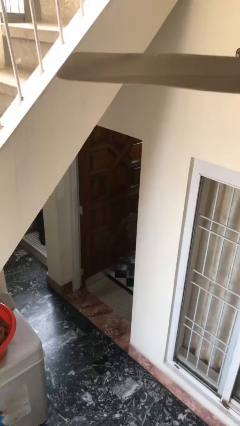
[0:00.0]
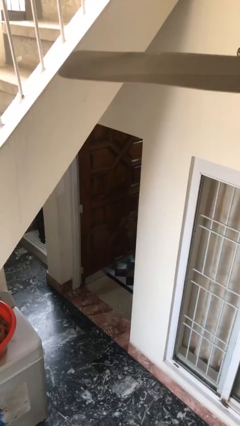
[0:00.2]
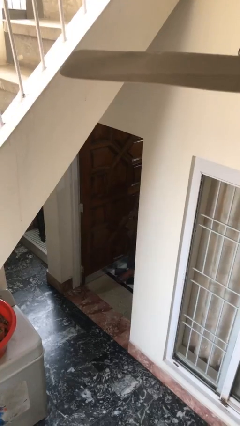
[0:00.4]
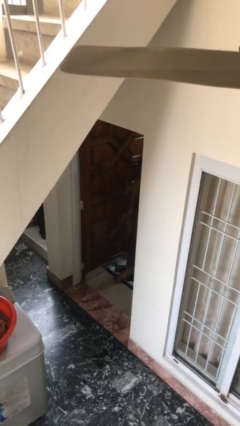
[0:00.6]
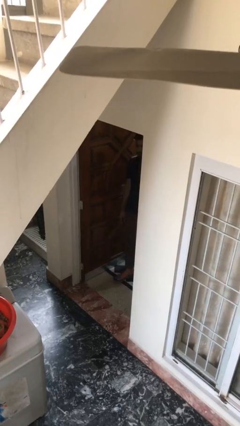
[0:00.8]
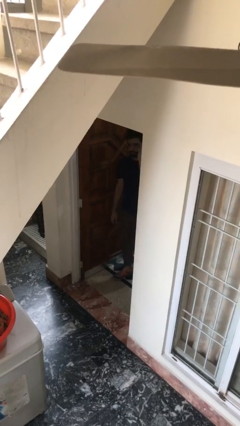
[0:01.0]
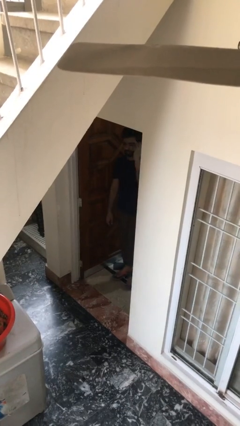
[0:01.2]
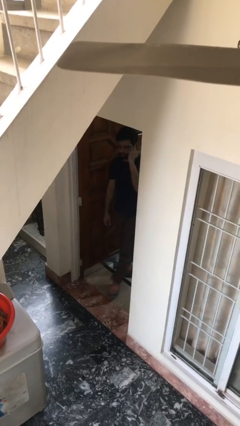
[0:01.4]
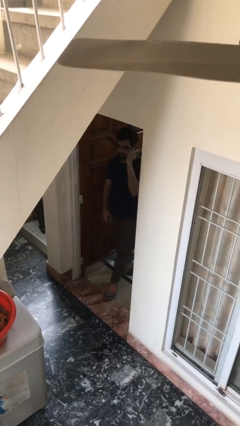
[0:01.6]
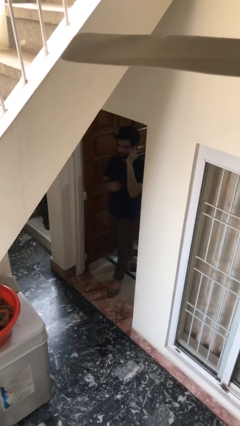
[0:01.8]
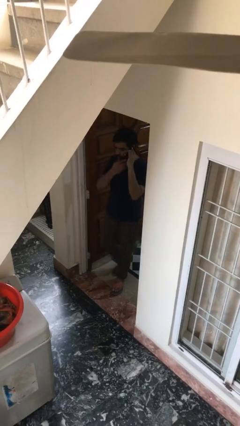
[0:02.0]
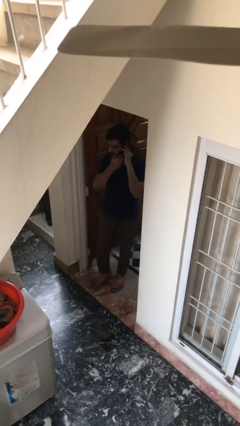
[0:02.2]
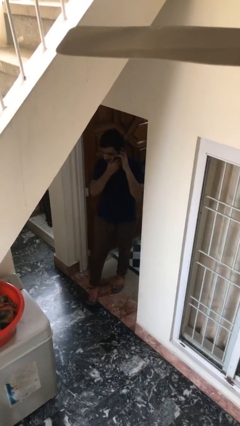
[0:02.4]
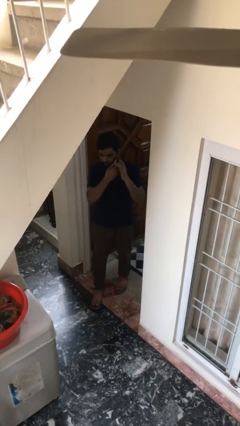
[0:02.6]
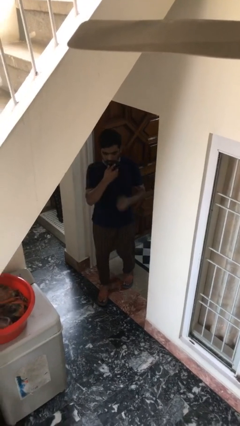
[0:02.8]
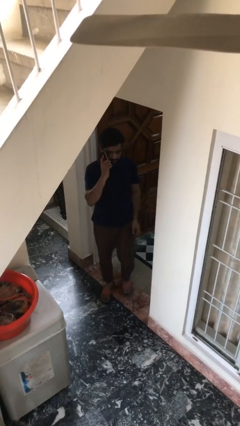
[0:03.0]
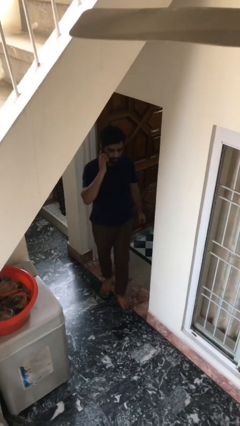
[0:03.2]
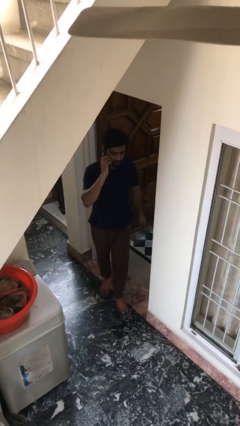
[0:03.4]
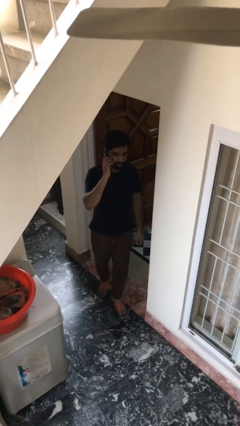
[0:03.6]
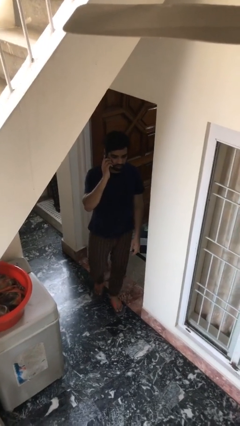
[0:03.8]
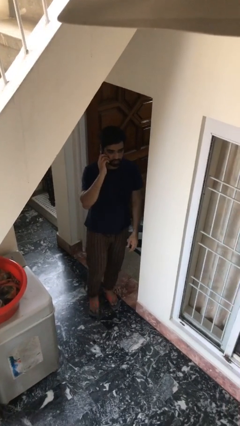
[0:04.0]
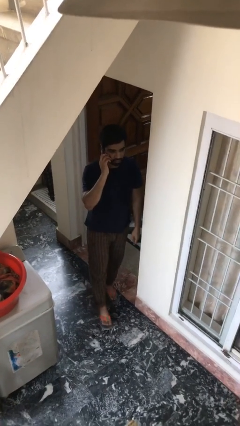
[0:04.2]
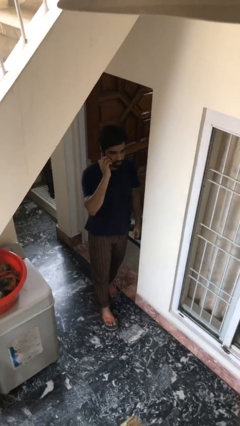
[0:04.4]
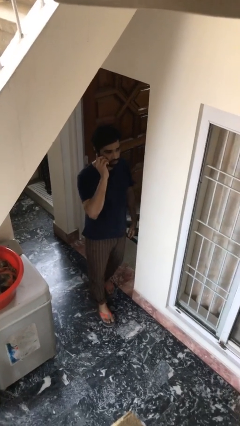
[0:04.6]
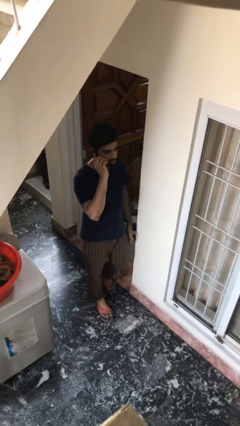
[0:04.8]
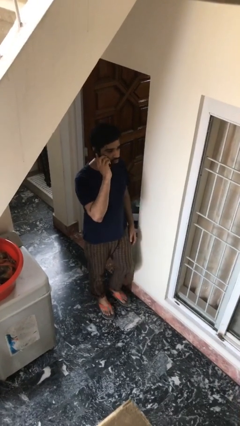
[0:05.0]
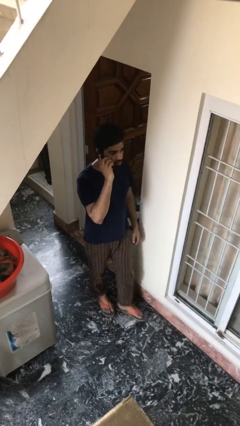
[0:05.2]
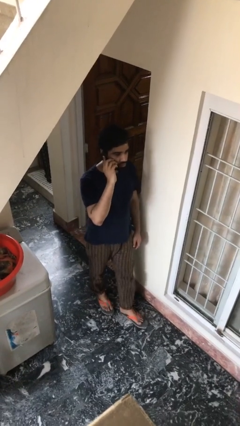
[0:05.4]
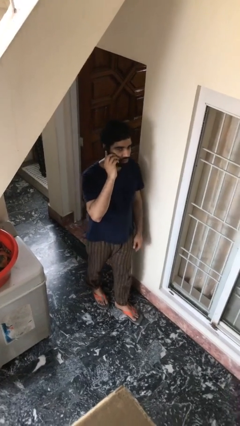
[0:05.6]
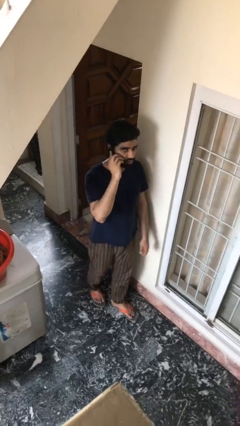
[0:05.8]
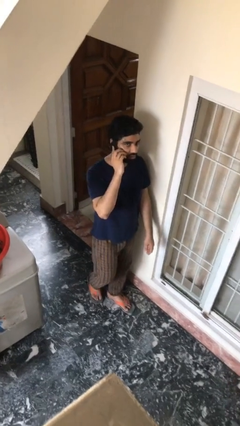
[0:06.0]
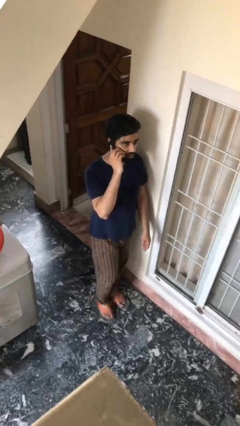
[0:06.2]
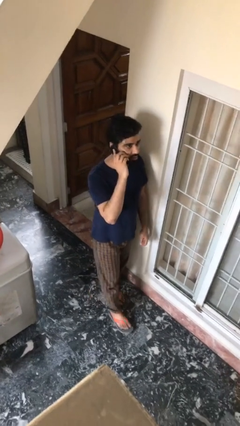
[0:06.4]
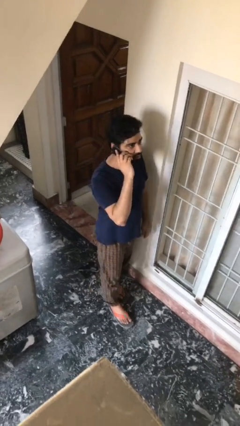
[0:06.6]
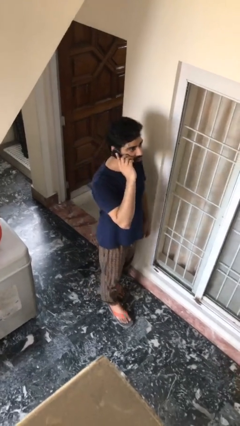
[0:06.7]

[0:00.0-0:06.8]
person enters scene through structure

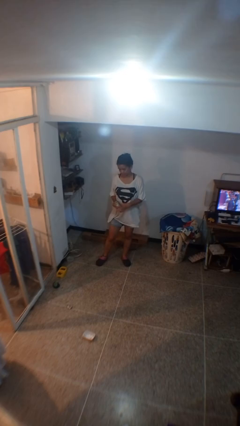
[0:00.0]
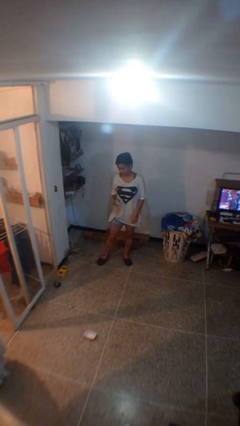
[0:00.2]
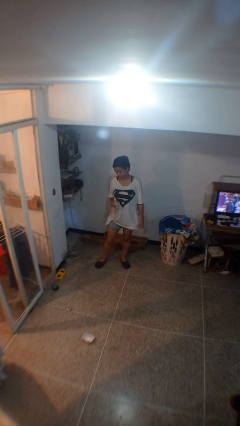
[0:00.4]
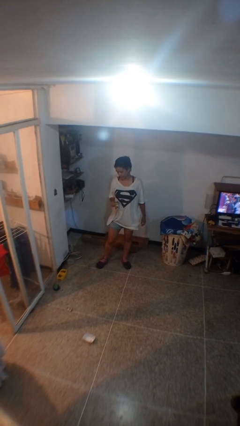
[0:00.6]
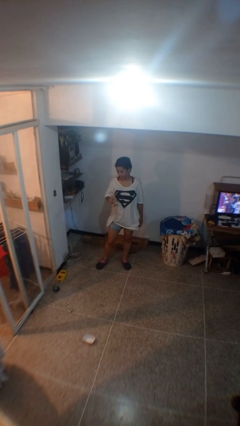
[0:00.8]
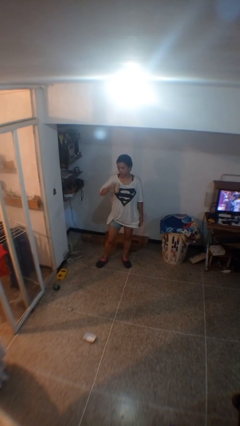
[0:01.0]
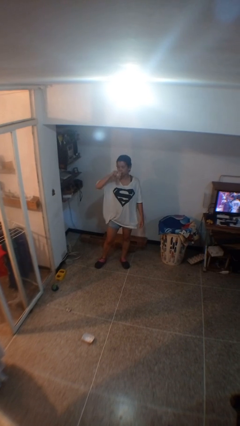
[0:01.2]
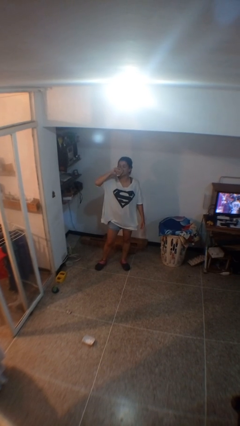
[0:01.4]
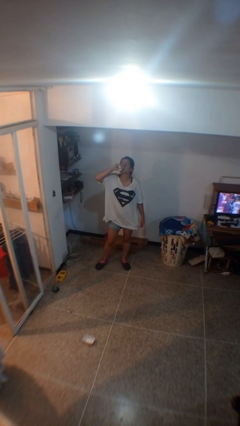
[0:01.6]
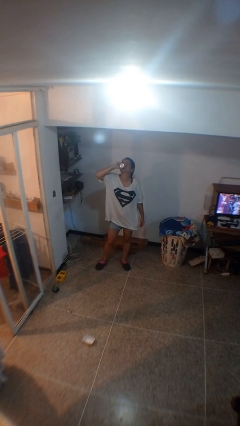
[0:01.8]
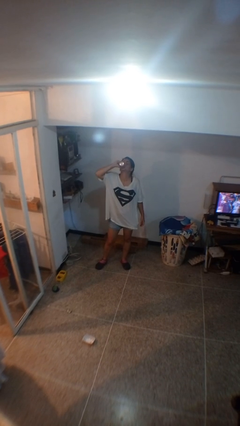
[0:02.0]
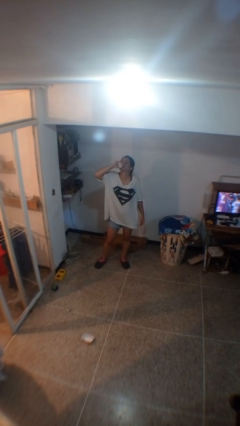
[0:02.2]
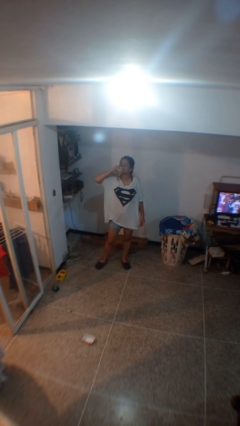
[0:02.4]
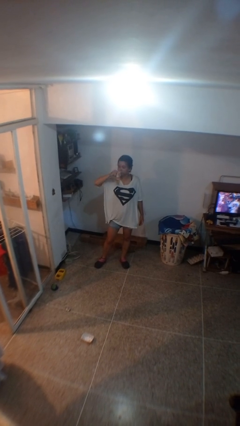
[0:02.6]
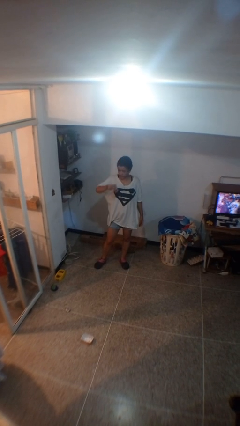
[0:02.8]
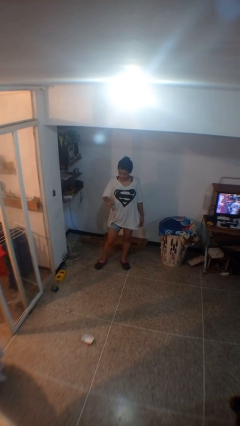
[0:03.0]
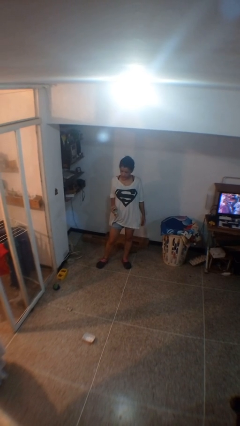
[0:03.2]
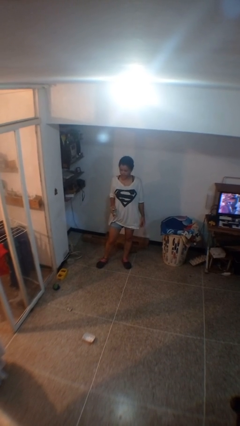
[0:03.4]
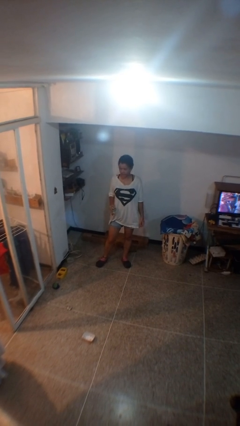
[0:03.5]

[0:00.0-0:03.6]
person drinks from beverage can

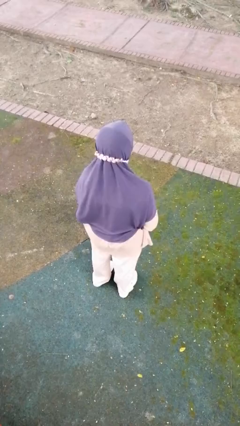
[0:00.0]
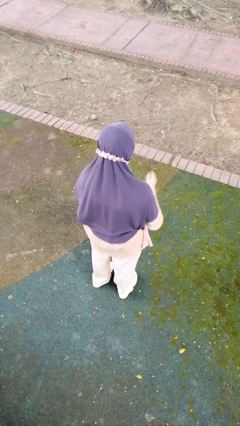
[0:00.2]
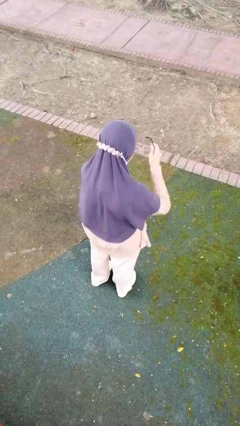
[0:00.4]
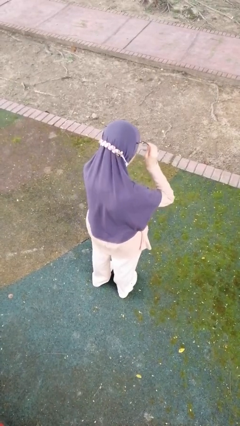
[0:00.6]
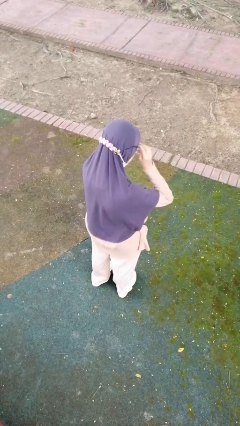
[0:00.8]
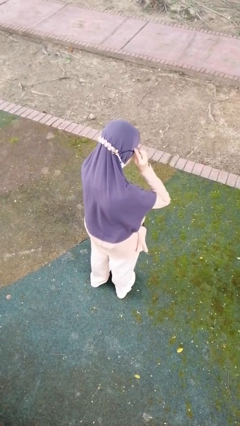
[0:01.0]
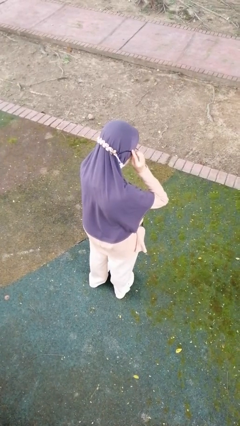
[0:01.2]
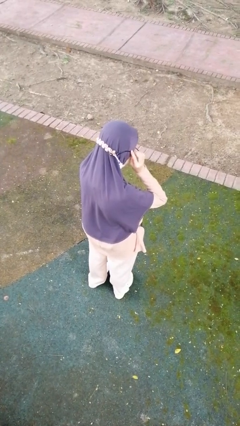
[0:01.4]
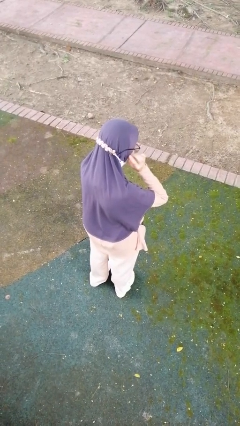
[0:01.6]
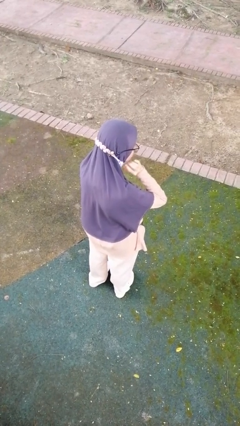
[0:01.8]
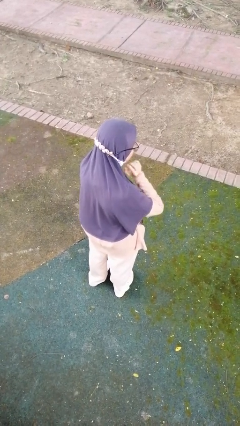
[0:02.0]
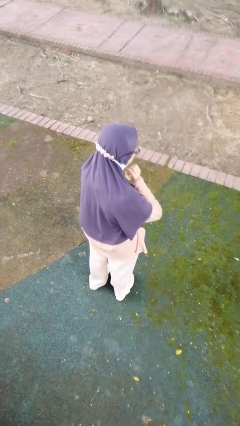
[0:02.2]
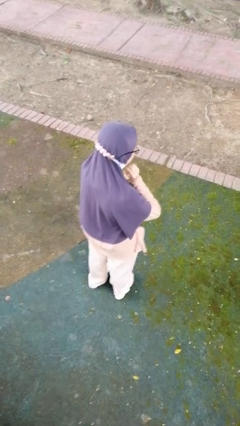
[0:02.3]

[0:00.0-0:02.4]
person puts on glasses

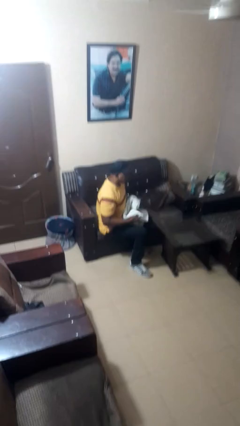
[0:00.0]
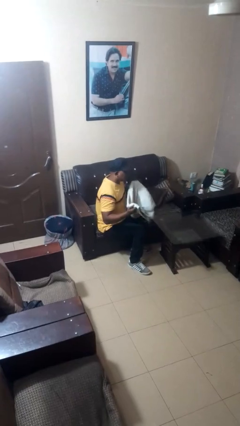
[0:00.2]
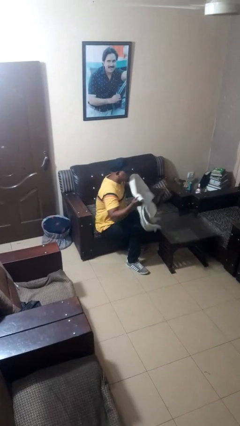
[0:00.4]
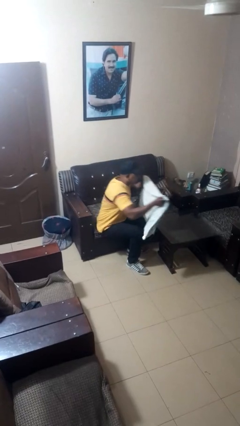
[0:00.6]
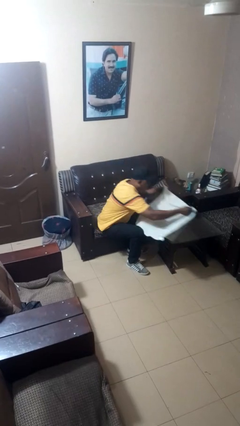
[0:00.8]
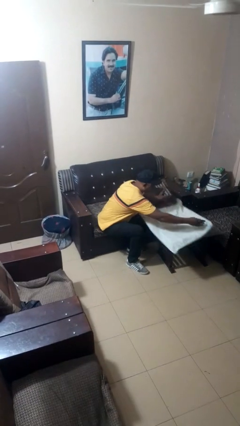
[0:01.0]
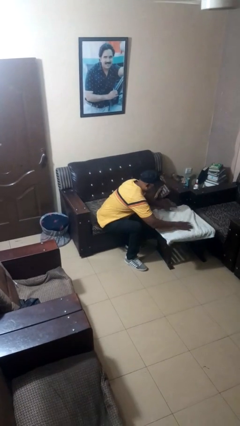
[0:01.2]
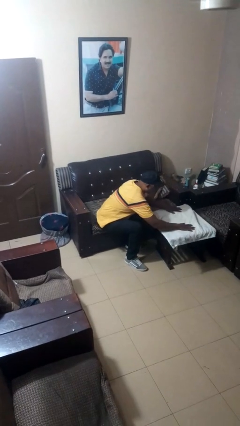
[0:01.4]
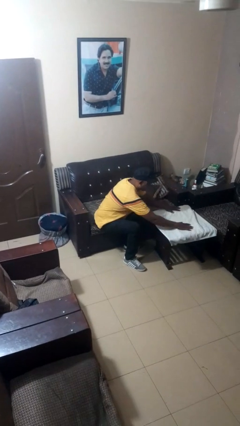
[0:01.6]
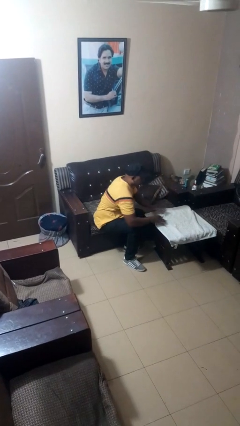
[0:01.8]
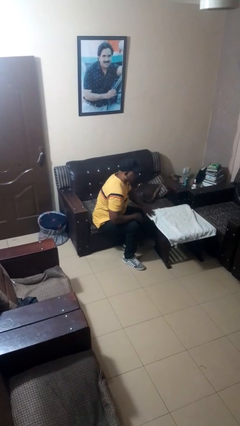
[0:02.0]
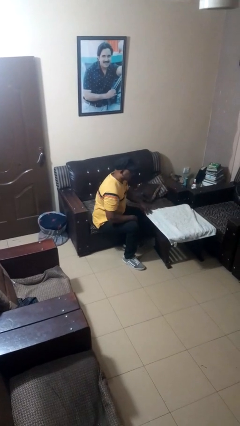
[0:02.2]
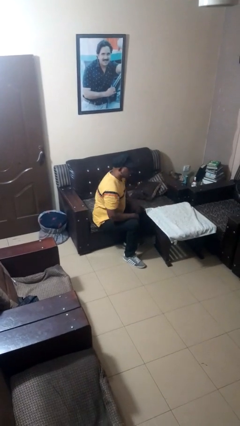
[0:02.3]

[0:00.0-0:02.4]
person spreads tablecloth

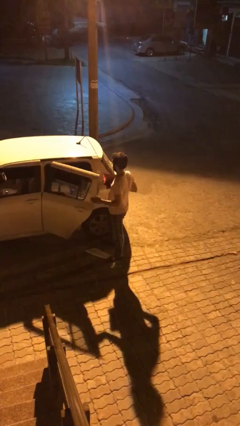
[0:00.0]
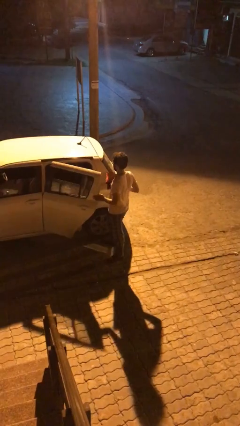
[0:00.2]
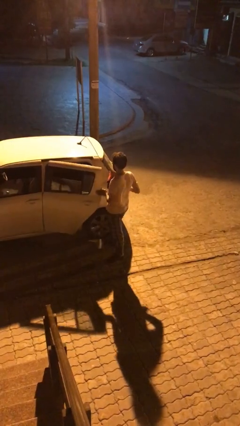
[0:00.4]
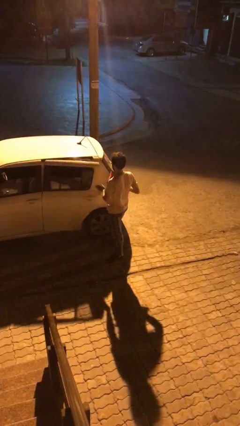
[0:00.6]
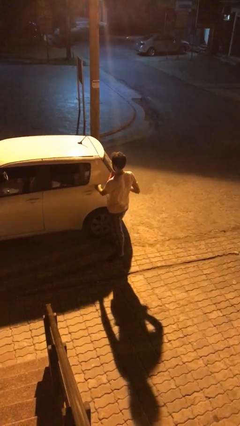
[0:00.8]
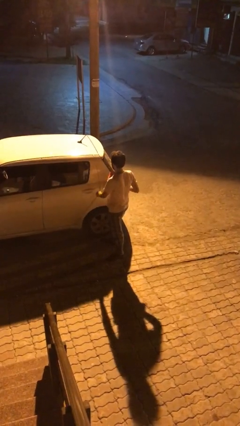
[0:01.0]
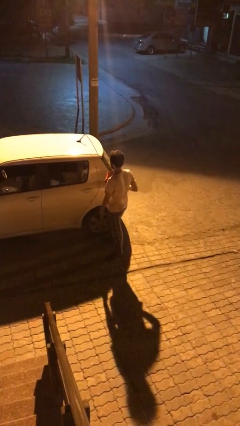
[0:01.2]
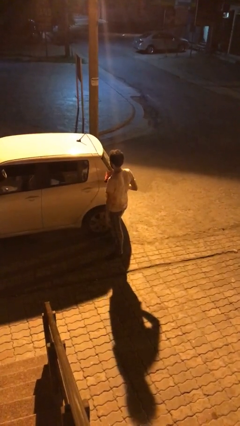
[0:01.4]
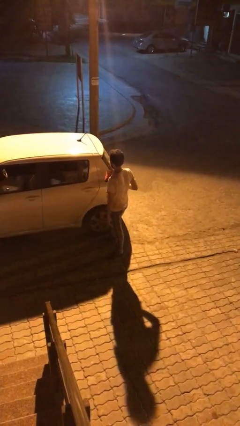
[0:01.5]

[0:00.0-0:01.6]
person closes car door

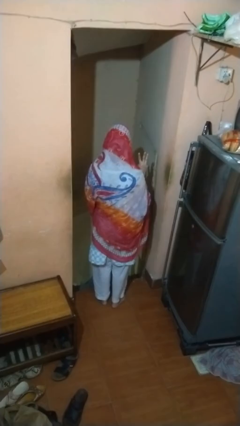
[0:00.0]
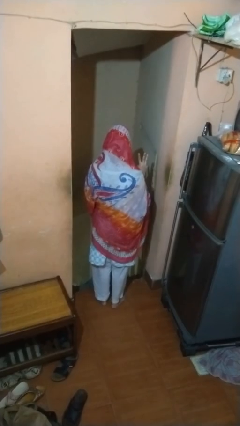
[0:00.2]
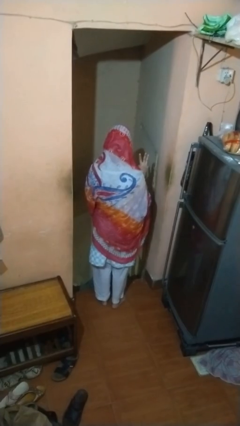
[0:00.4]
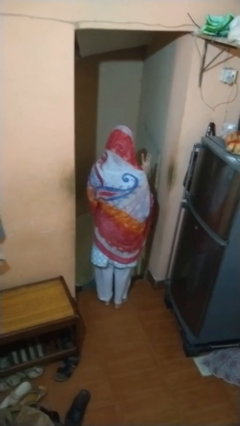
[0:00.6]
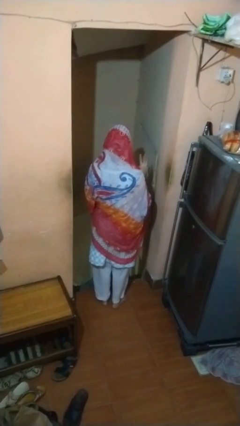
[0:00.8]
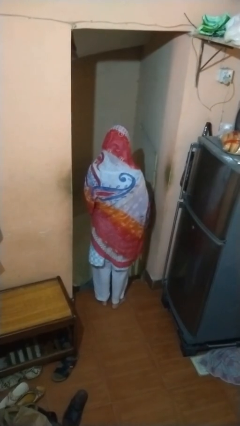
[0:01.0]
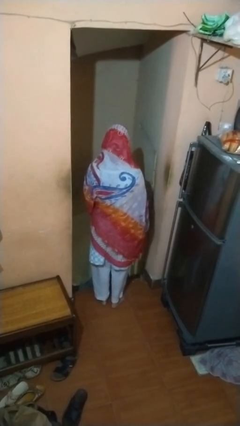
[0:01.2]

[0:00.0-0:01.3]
person gestures number three
